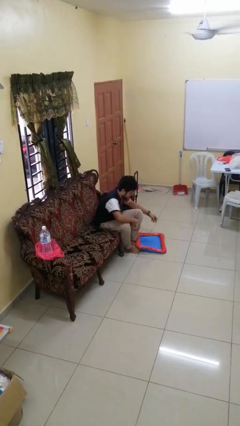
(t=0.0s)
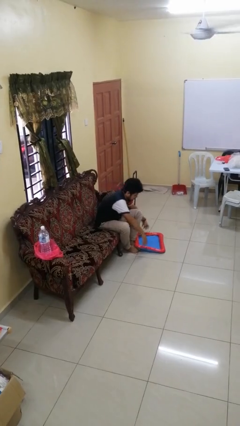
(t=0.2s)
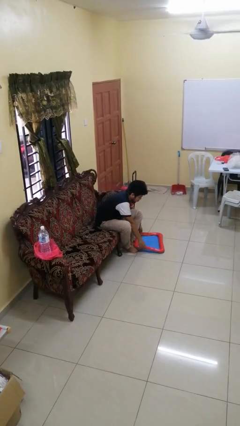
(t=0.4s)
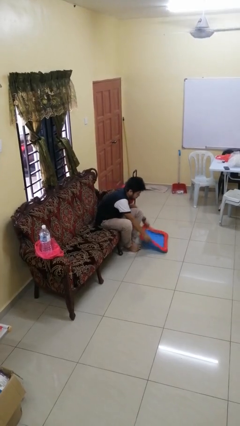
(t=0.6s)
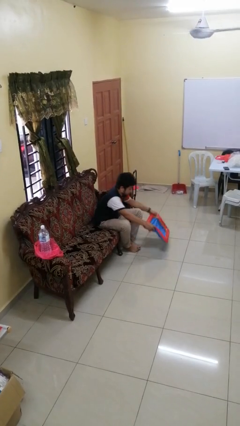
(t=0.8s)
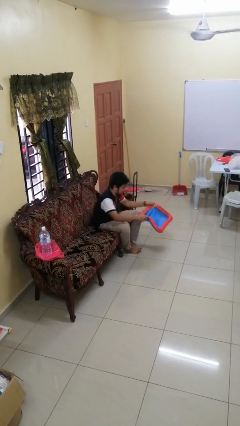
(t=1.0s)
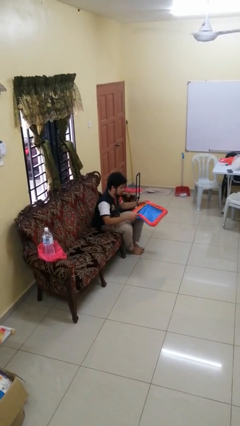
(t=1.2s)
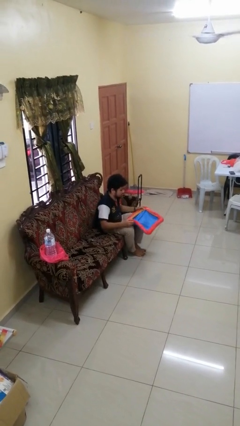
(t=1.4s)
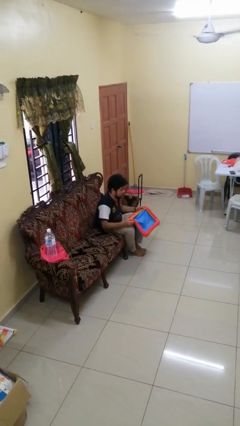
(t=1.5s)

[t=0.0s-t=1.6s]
person picks up object from floor

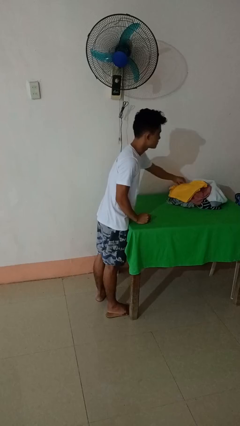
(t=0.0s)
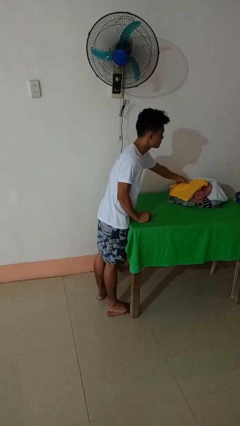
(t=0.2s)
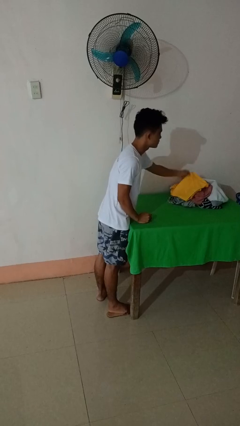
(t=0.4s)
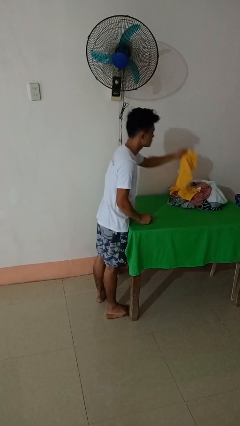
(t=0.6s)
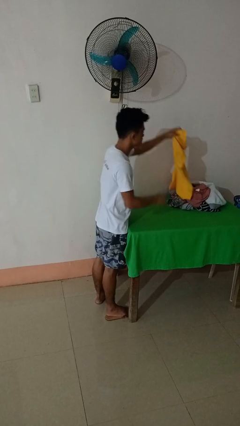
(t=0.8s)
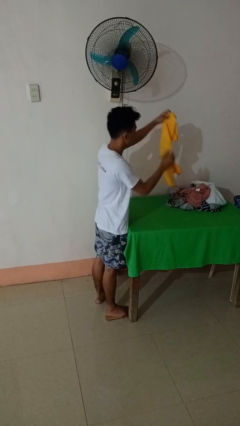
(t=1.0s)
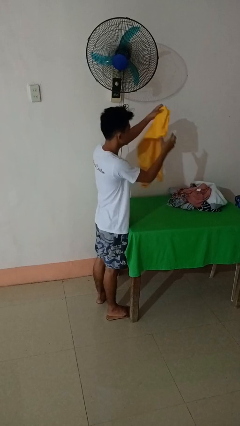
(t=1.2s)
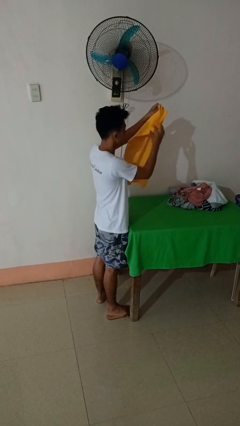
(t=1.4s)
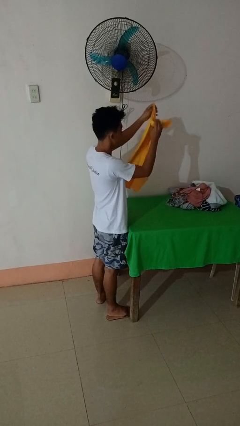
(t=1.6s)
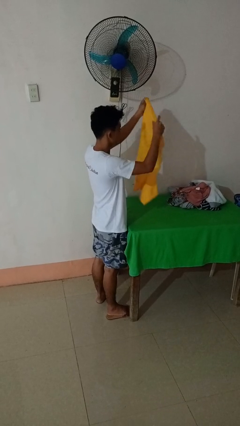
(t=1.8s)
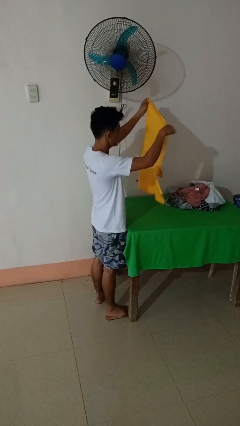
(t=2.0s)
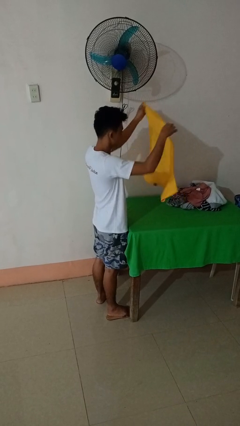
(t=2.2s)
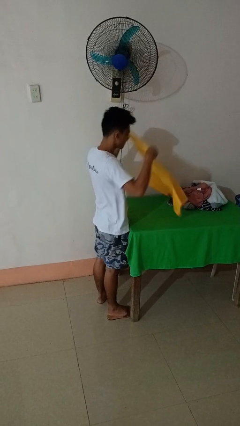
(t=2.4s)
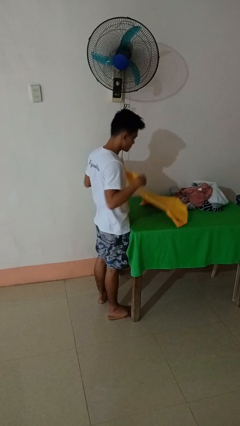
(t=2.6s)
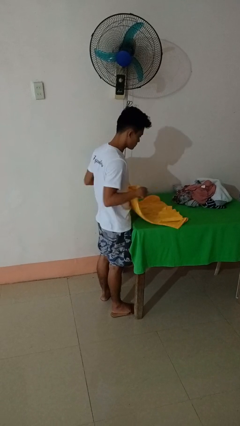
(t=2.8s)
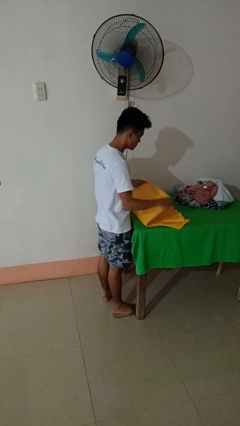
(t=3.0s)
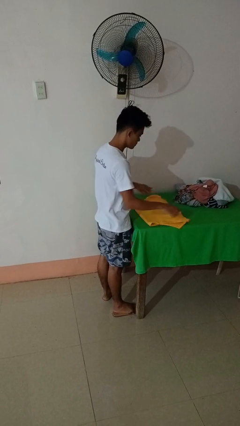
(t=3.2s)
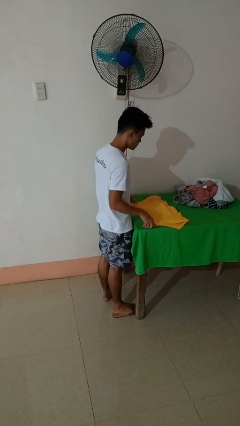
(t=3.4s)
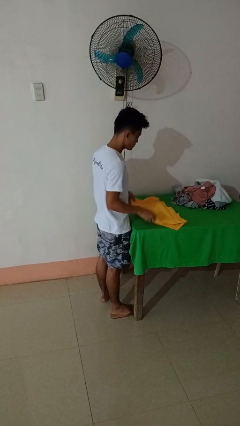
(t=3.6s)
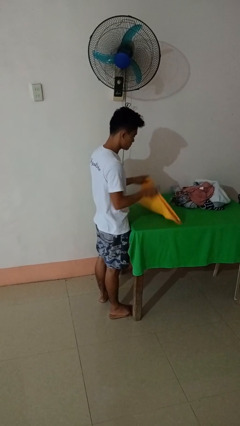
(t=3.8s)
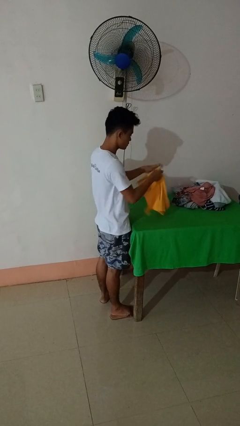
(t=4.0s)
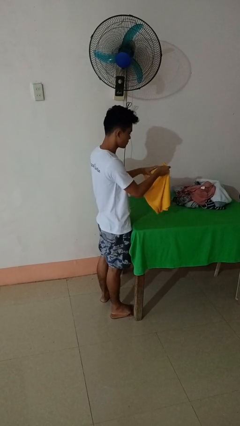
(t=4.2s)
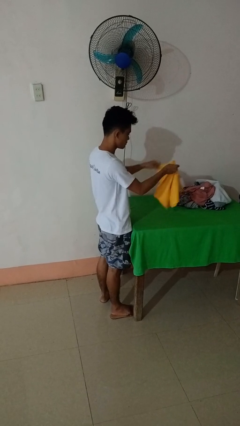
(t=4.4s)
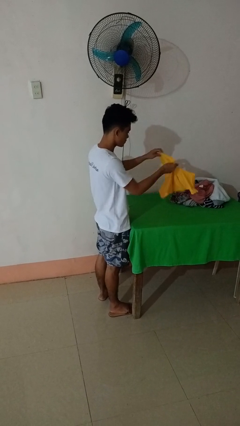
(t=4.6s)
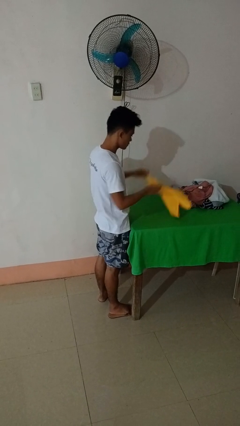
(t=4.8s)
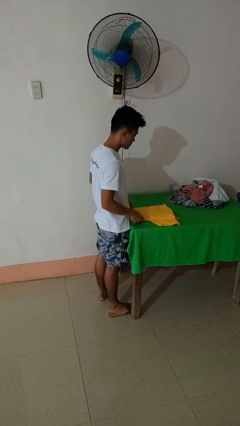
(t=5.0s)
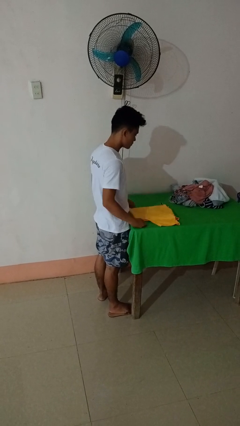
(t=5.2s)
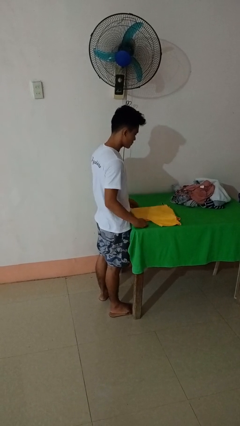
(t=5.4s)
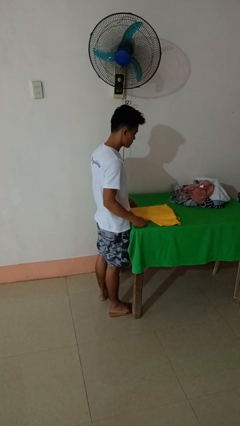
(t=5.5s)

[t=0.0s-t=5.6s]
person folds shirt

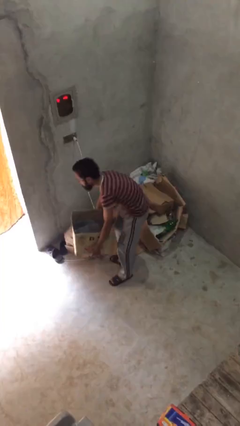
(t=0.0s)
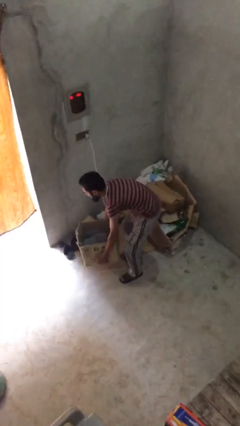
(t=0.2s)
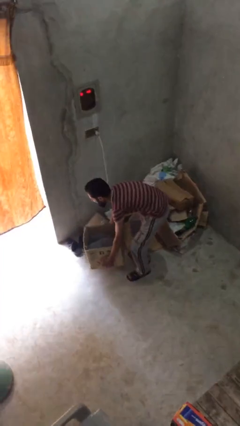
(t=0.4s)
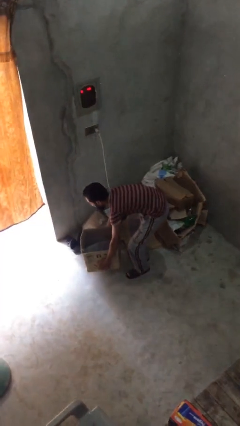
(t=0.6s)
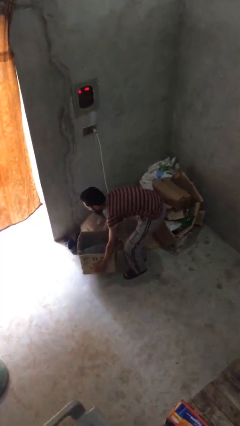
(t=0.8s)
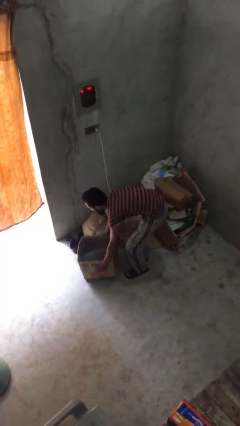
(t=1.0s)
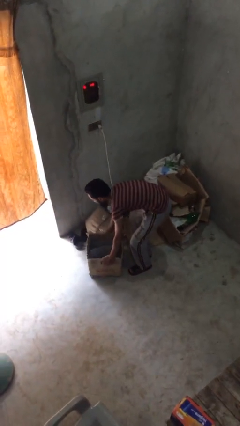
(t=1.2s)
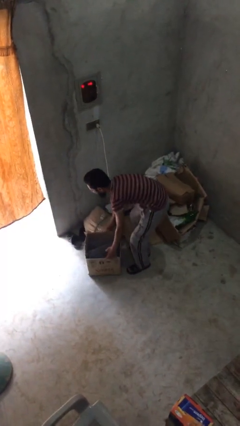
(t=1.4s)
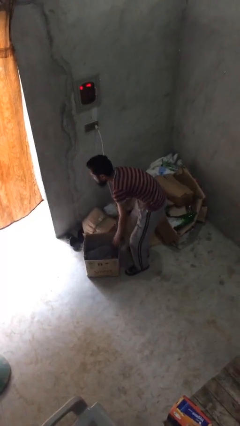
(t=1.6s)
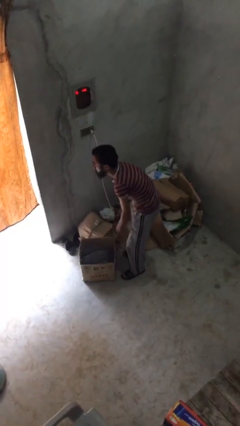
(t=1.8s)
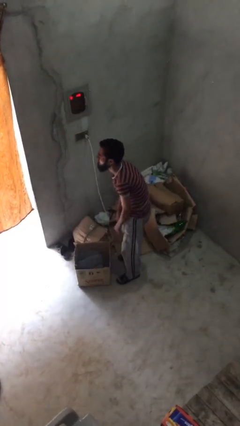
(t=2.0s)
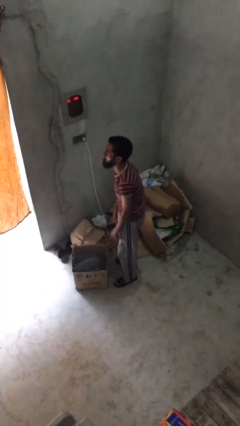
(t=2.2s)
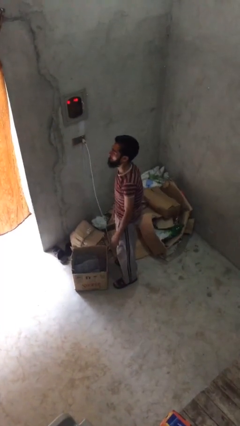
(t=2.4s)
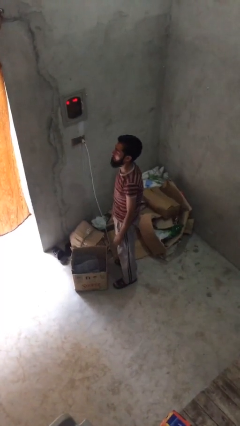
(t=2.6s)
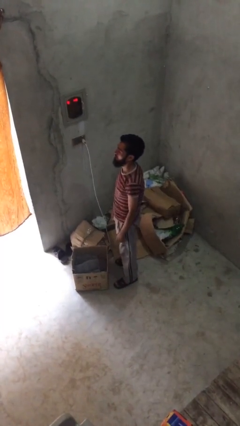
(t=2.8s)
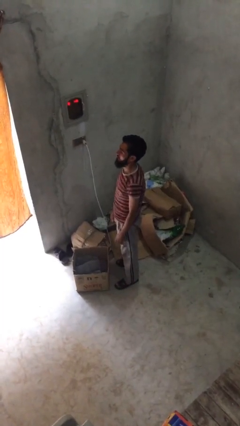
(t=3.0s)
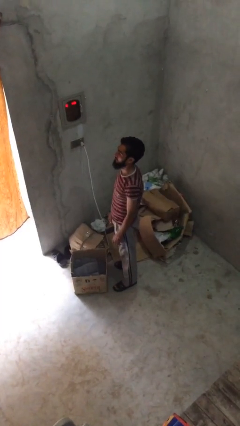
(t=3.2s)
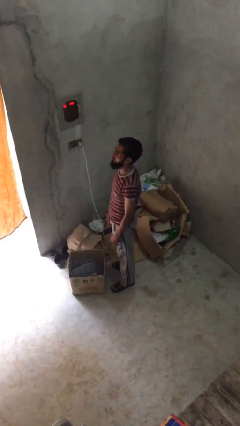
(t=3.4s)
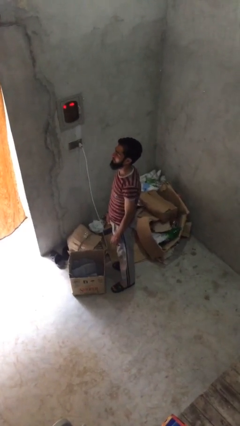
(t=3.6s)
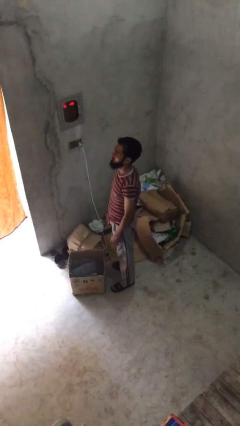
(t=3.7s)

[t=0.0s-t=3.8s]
person puts down object on floor

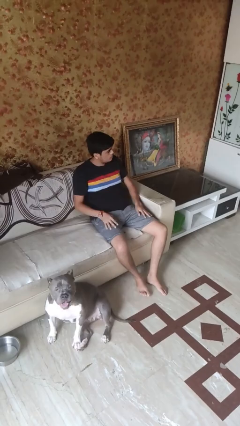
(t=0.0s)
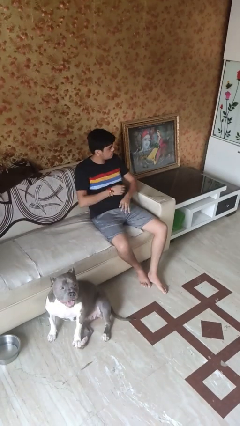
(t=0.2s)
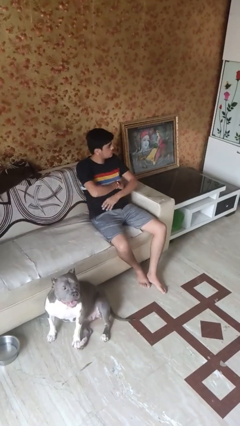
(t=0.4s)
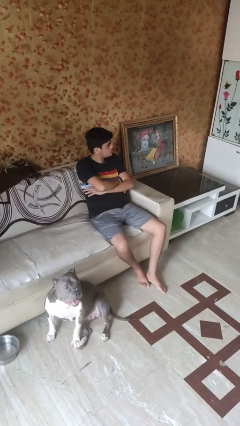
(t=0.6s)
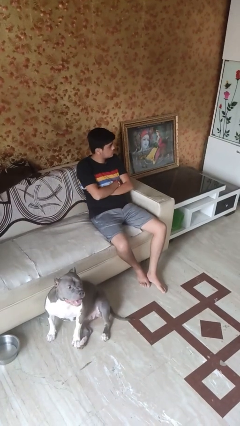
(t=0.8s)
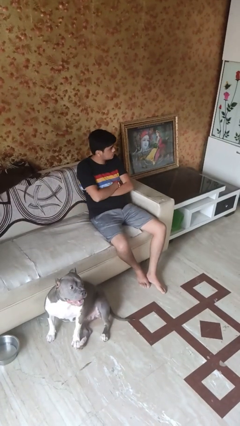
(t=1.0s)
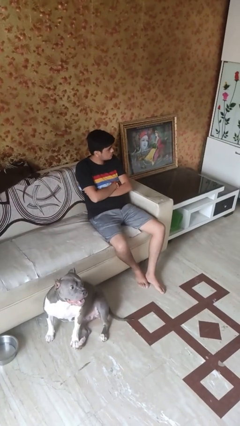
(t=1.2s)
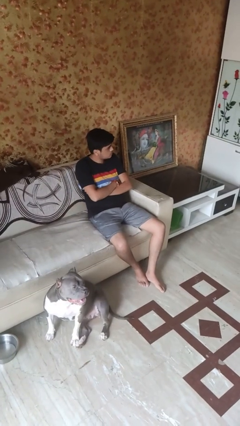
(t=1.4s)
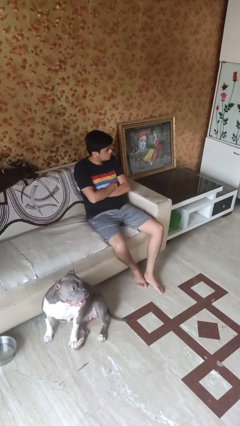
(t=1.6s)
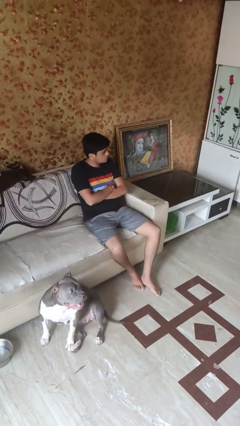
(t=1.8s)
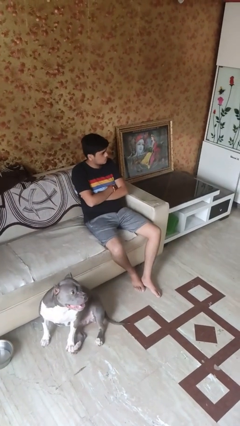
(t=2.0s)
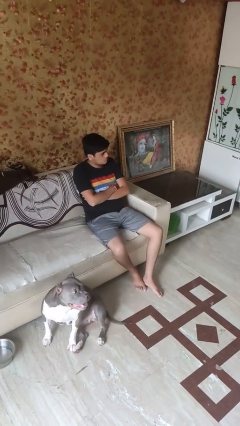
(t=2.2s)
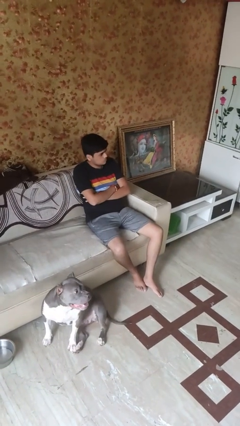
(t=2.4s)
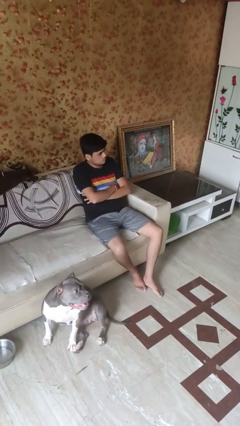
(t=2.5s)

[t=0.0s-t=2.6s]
person crosses arms

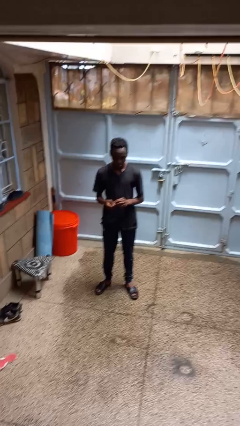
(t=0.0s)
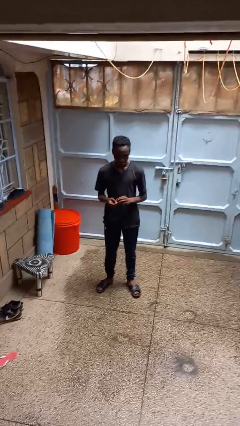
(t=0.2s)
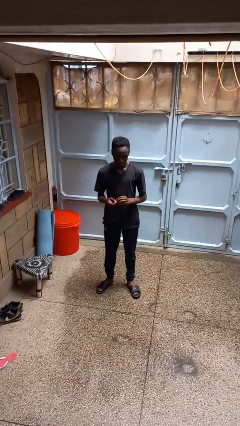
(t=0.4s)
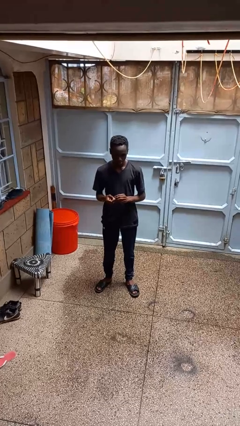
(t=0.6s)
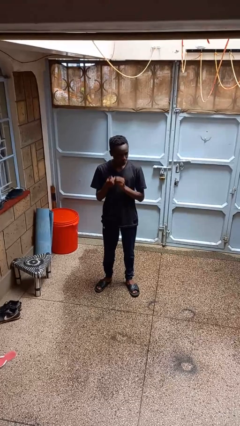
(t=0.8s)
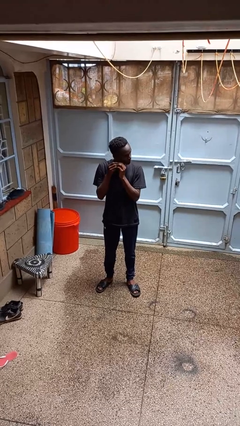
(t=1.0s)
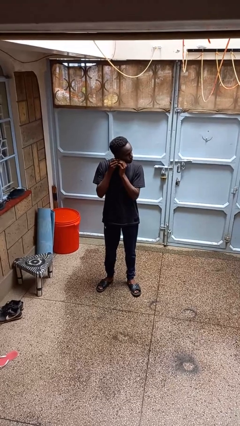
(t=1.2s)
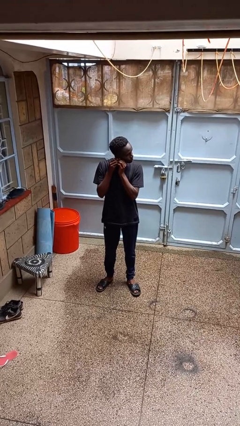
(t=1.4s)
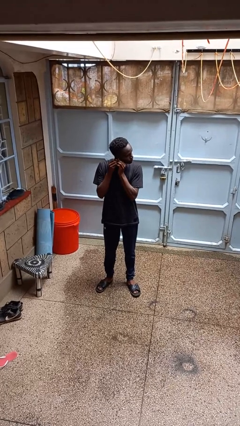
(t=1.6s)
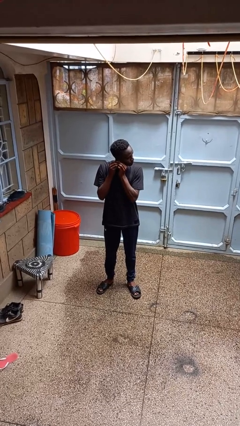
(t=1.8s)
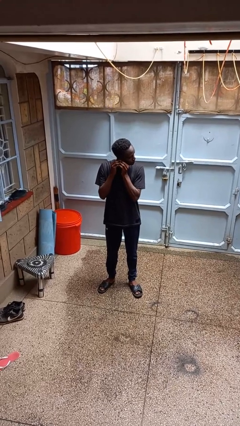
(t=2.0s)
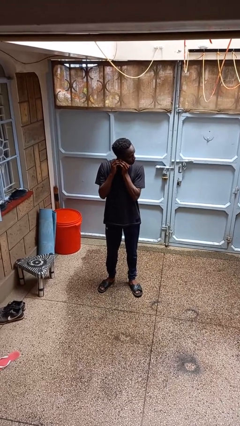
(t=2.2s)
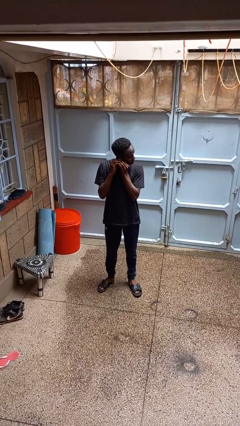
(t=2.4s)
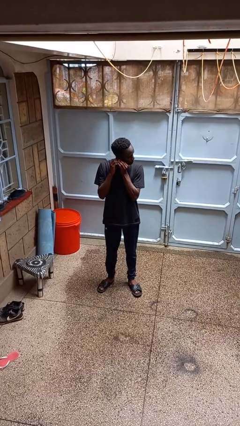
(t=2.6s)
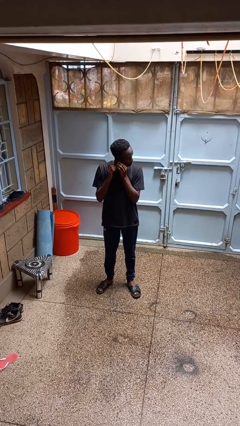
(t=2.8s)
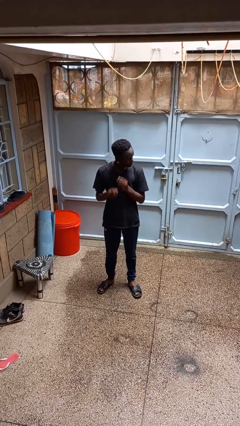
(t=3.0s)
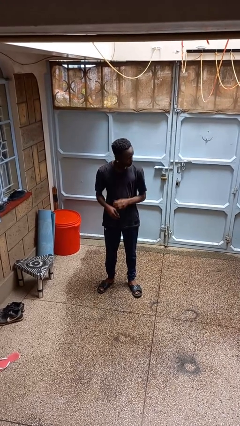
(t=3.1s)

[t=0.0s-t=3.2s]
person puts on earrings

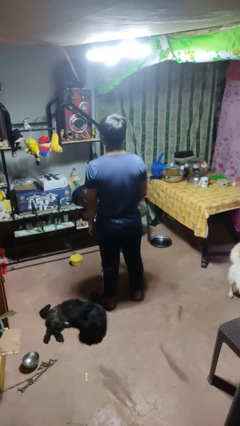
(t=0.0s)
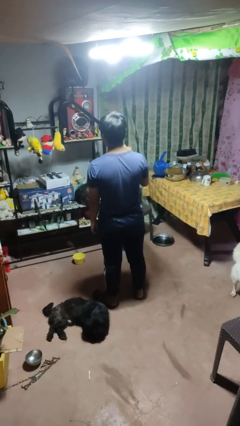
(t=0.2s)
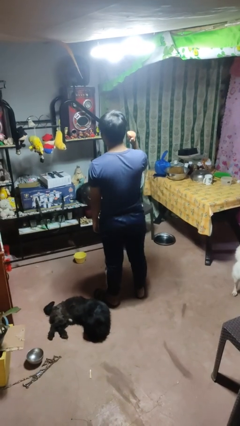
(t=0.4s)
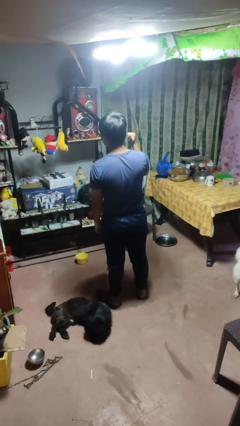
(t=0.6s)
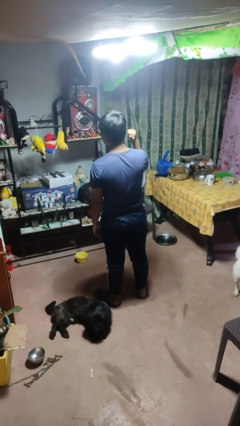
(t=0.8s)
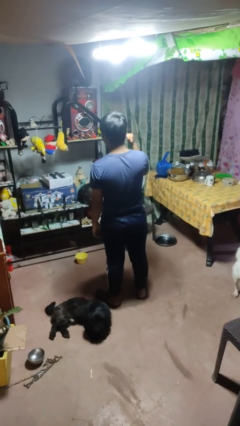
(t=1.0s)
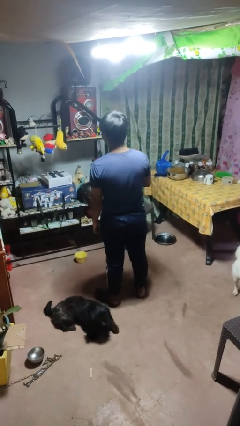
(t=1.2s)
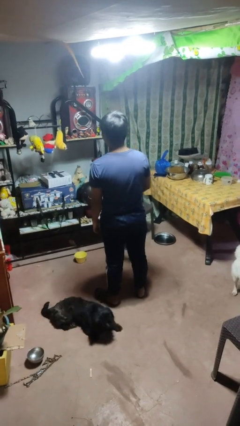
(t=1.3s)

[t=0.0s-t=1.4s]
person gestures behind me
